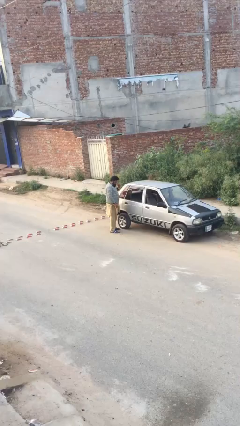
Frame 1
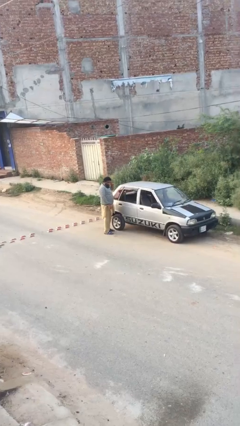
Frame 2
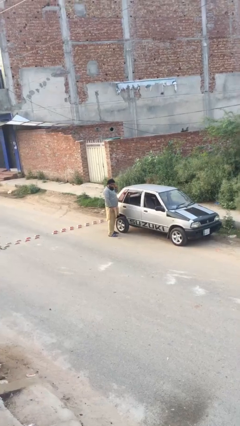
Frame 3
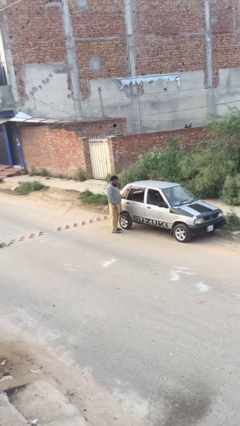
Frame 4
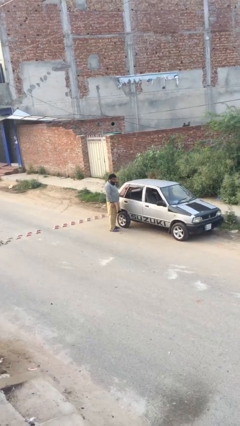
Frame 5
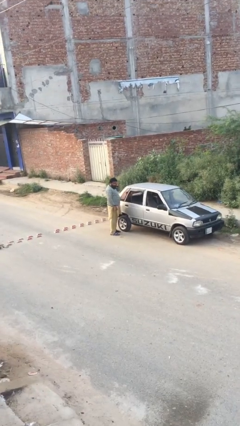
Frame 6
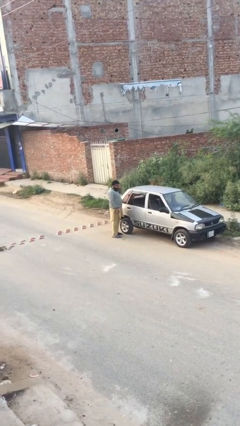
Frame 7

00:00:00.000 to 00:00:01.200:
person opens car door

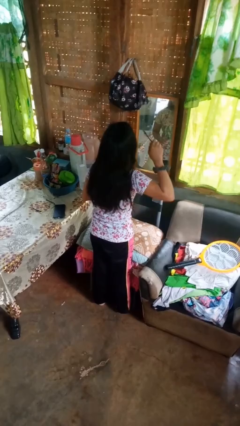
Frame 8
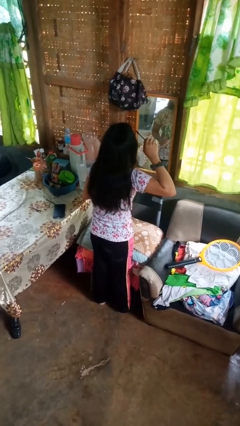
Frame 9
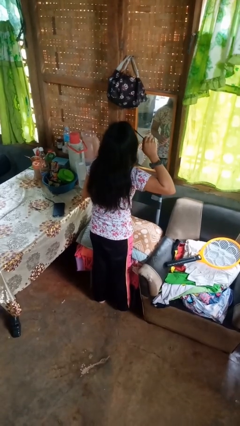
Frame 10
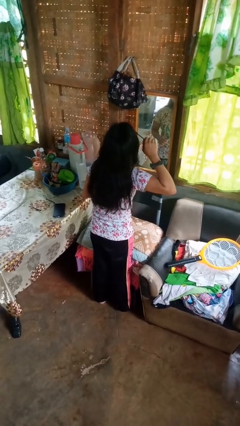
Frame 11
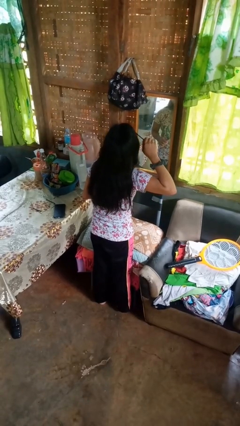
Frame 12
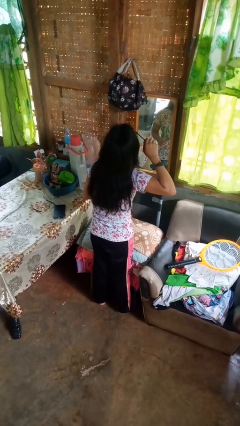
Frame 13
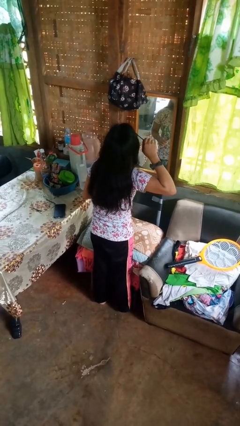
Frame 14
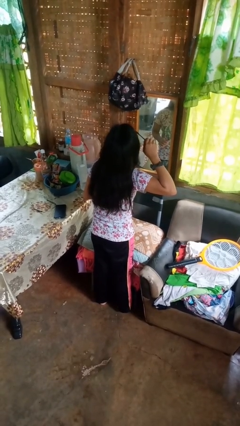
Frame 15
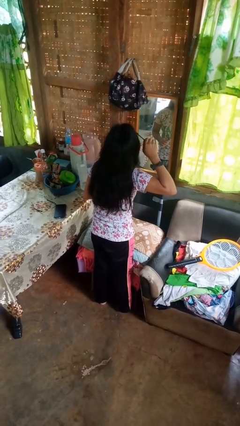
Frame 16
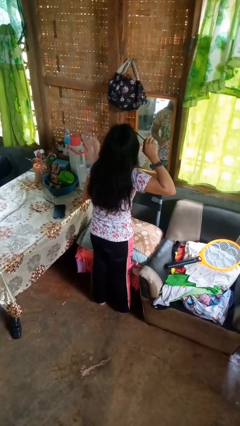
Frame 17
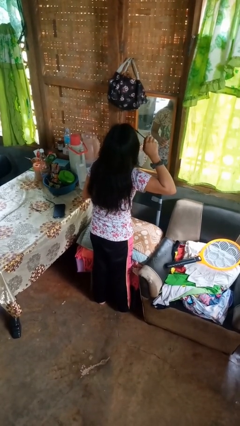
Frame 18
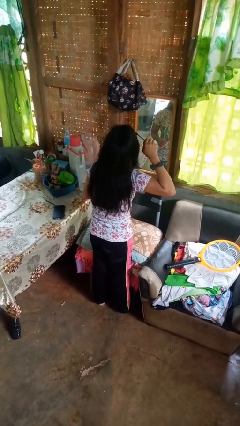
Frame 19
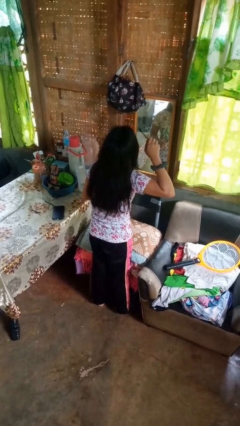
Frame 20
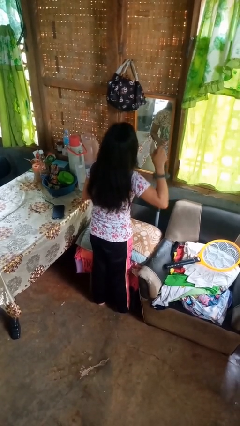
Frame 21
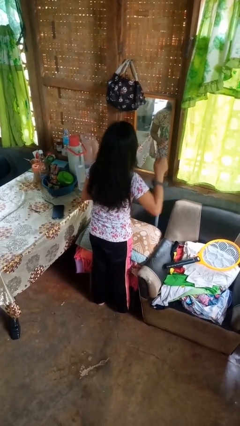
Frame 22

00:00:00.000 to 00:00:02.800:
person applies eye makeup

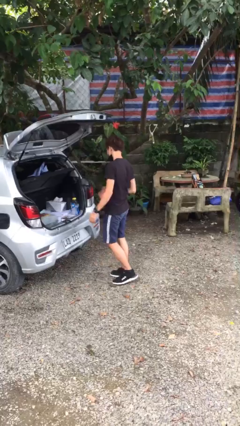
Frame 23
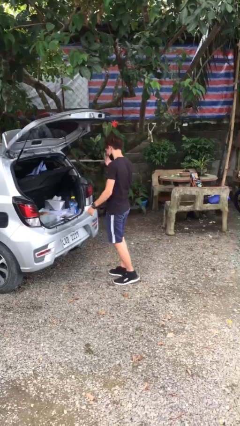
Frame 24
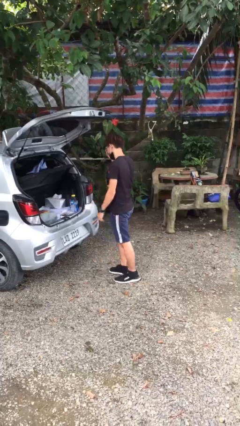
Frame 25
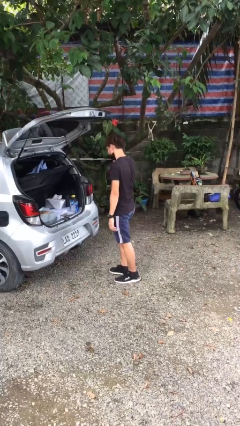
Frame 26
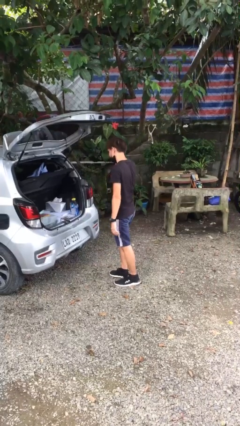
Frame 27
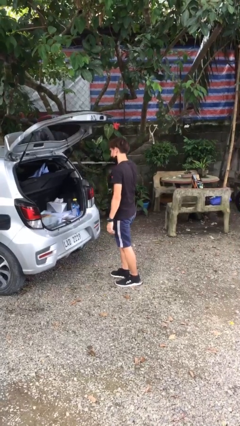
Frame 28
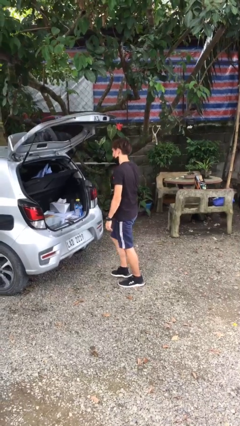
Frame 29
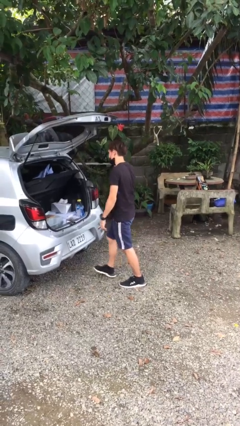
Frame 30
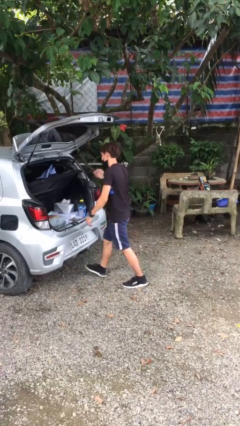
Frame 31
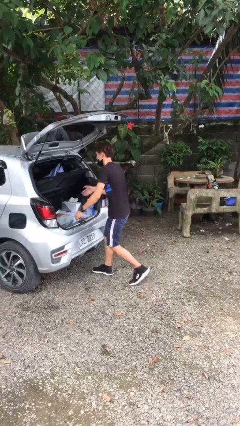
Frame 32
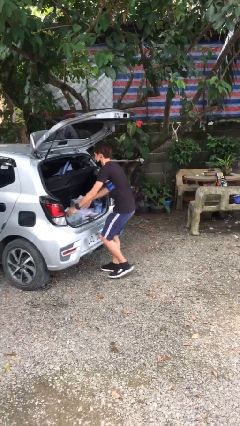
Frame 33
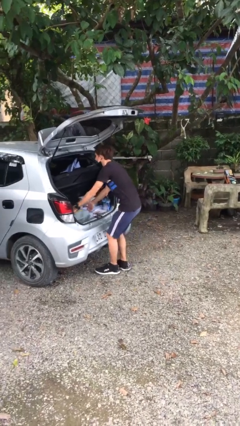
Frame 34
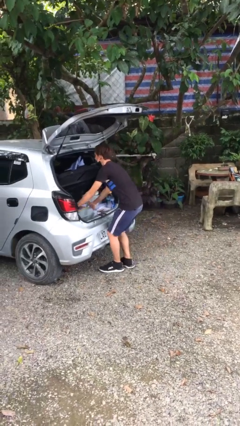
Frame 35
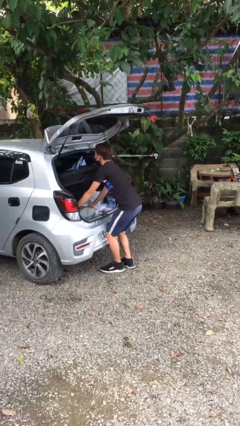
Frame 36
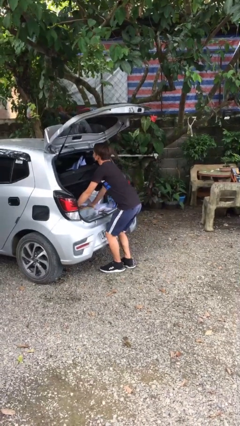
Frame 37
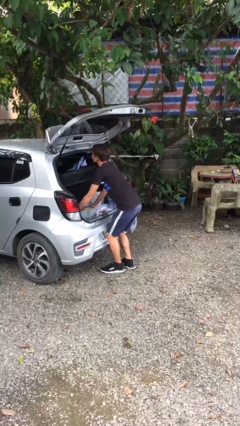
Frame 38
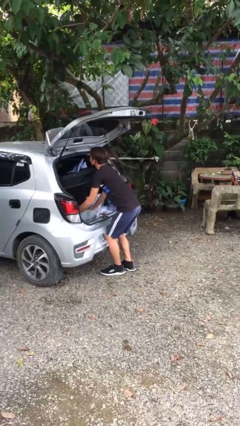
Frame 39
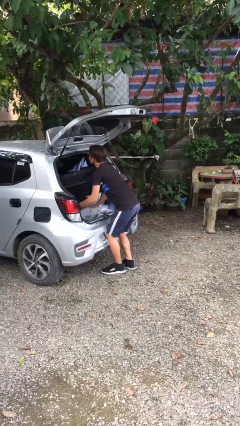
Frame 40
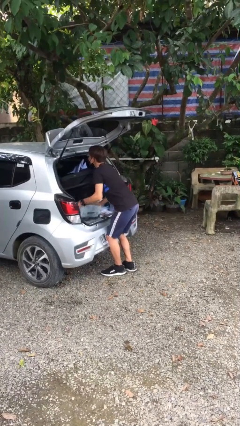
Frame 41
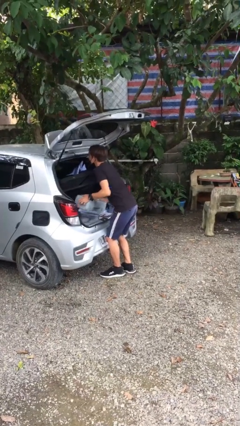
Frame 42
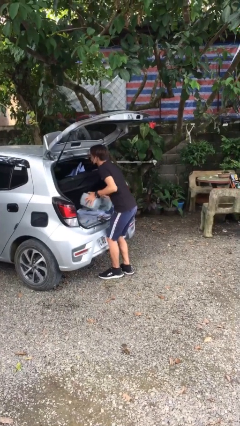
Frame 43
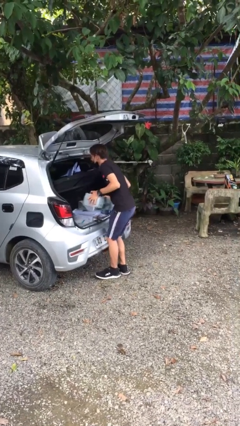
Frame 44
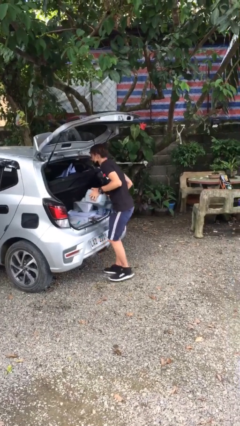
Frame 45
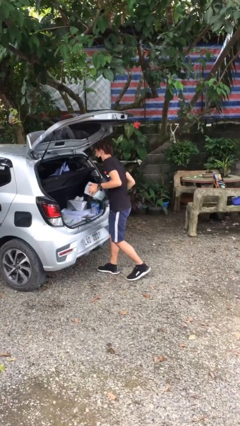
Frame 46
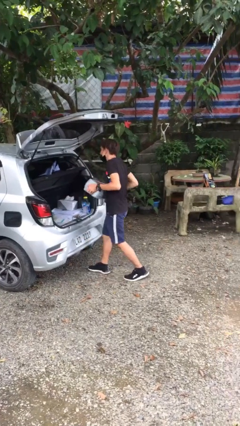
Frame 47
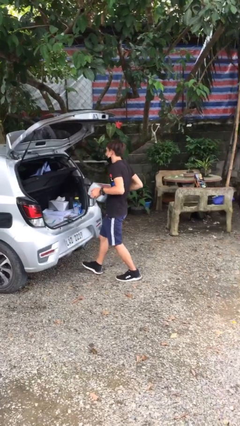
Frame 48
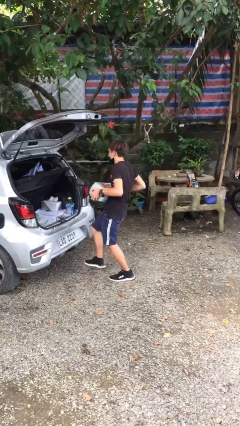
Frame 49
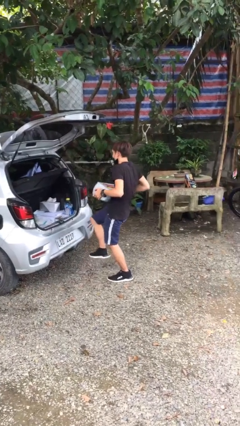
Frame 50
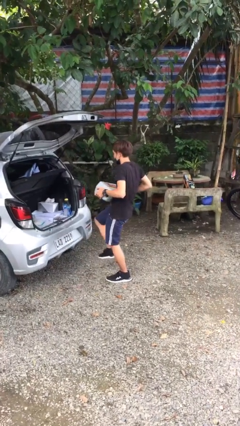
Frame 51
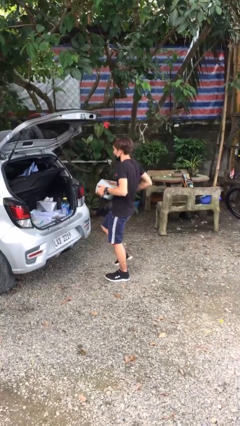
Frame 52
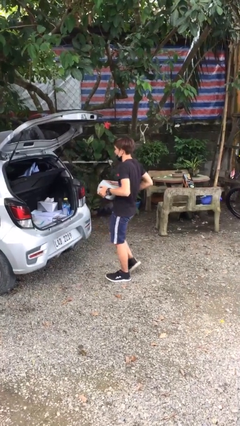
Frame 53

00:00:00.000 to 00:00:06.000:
person unloads car

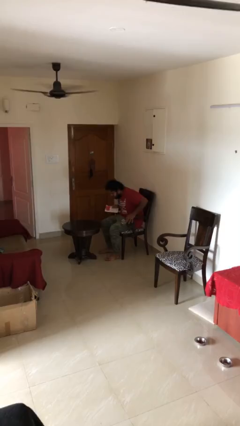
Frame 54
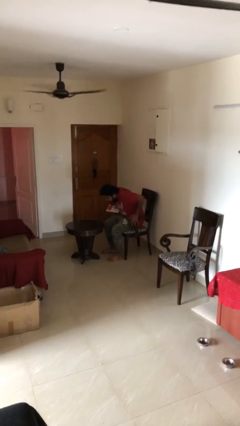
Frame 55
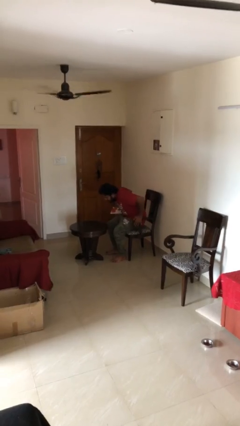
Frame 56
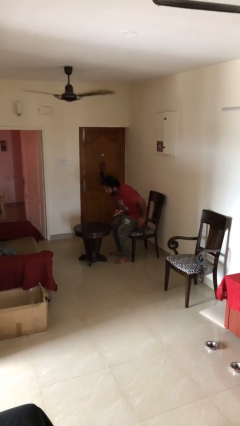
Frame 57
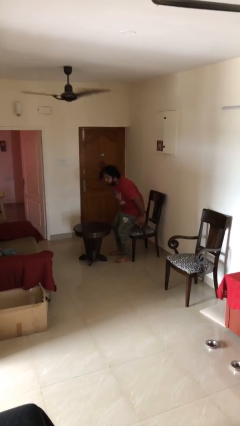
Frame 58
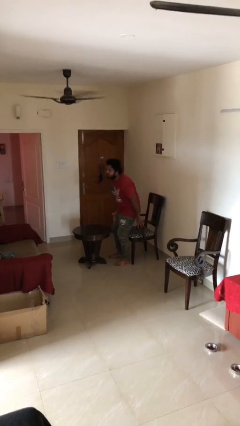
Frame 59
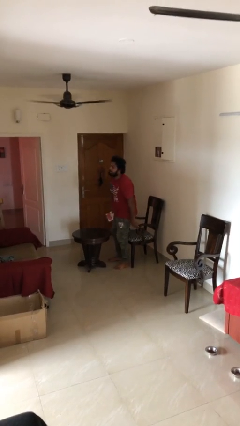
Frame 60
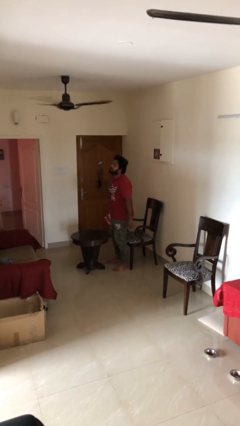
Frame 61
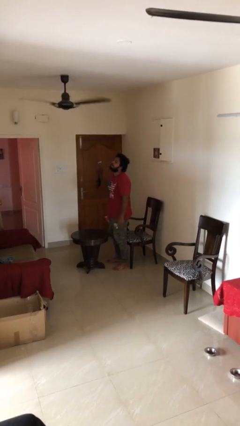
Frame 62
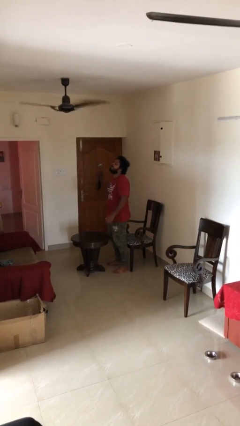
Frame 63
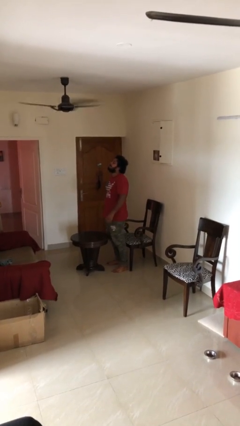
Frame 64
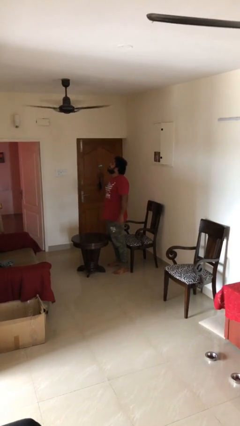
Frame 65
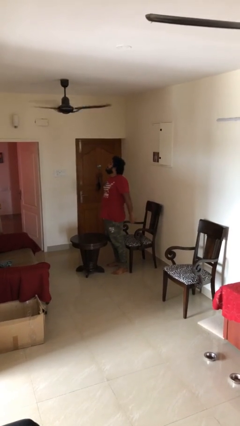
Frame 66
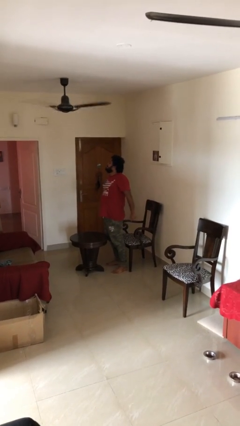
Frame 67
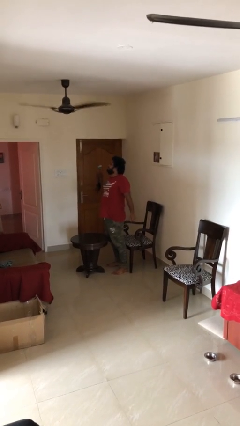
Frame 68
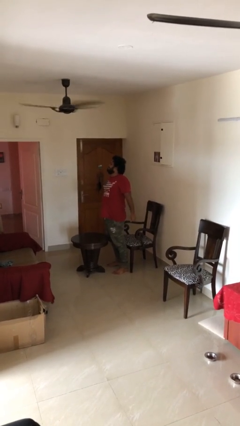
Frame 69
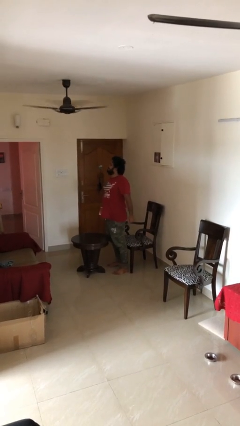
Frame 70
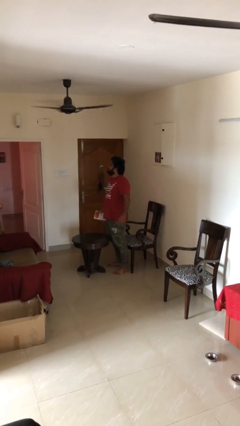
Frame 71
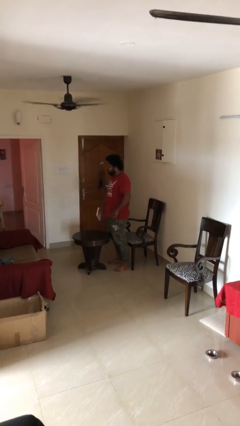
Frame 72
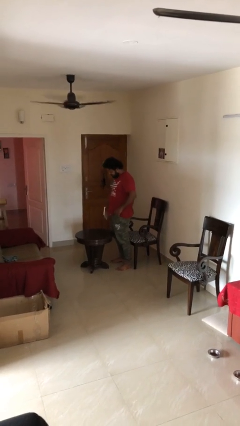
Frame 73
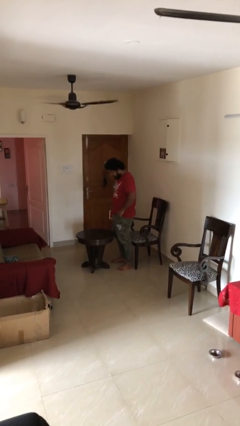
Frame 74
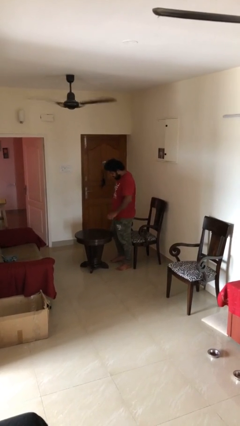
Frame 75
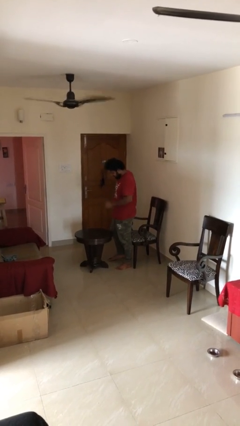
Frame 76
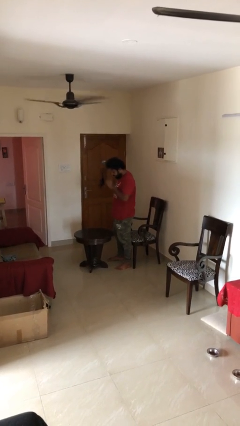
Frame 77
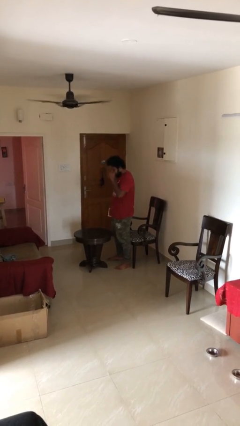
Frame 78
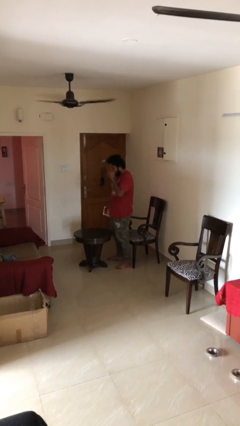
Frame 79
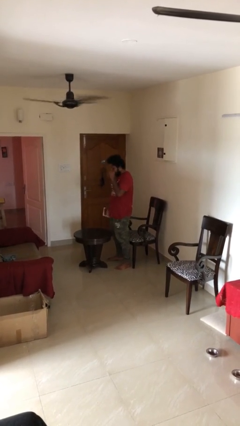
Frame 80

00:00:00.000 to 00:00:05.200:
person stands up

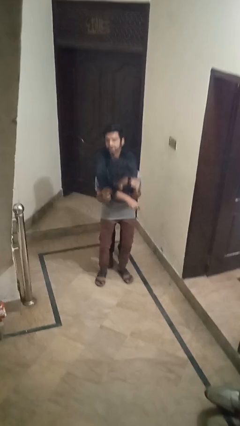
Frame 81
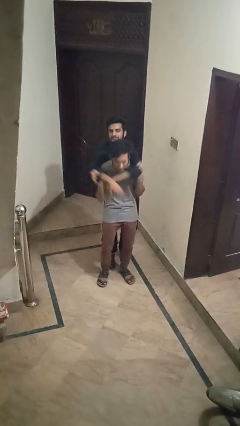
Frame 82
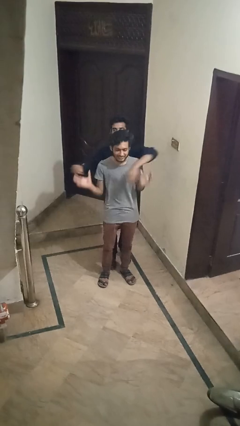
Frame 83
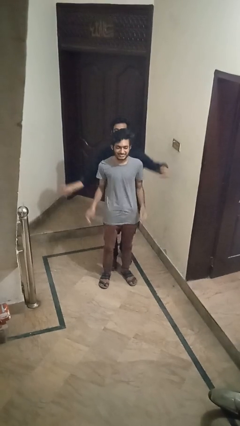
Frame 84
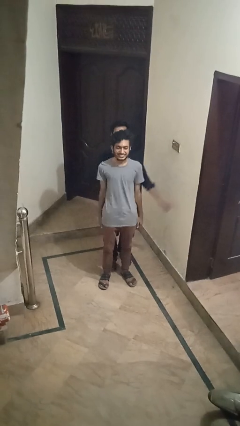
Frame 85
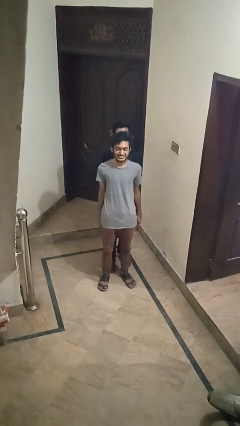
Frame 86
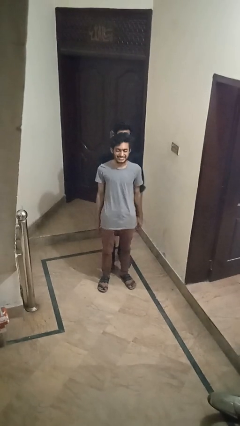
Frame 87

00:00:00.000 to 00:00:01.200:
person puts down person

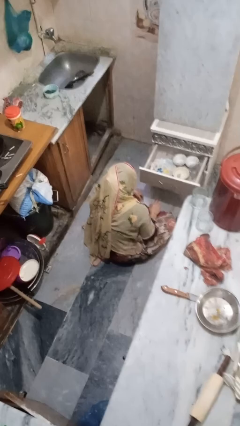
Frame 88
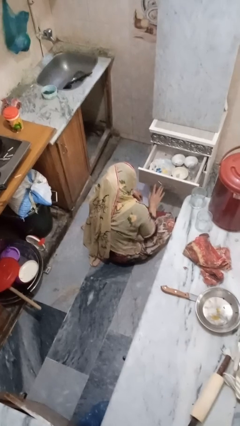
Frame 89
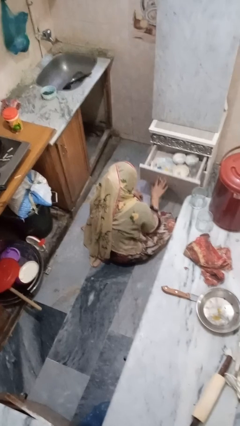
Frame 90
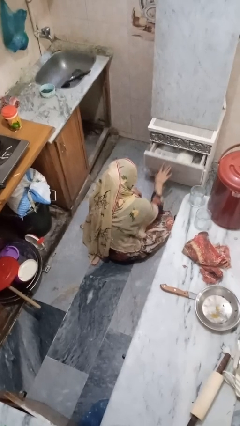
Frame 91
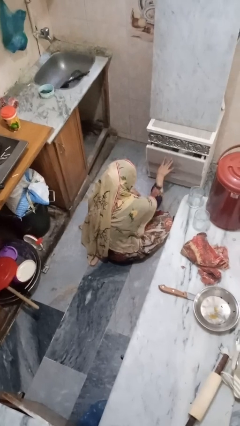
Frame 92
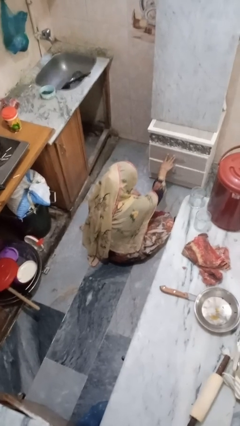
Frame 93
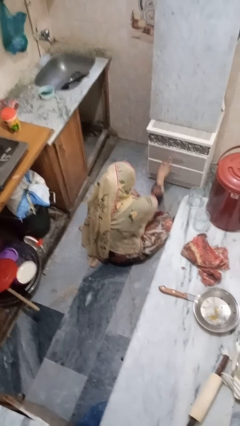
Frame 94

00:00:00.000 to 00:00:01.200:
person closes kitchen drawer
